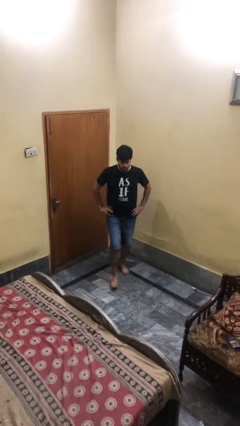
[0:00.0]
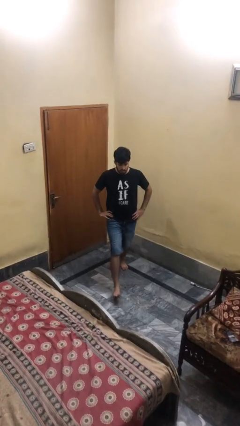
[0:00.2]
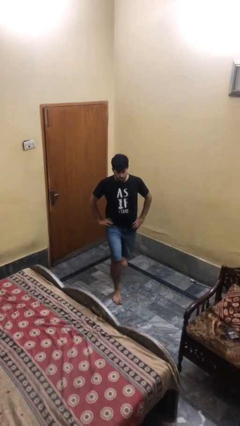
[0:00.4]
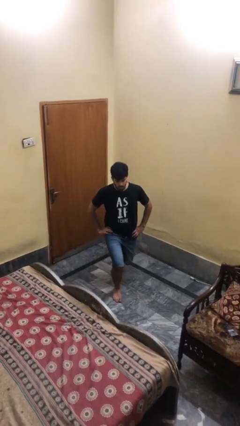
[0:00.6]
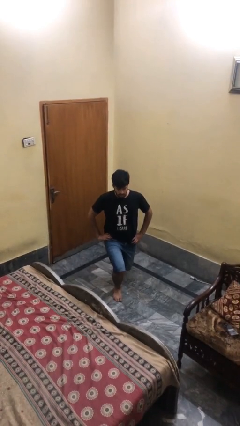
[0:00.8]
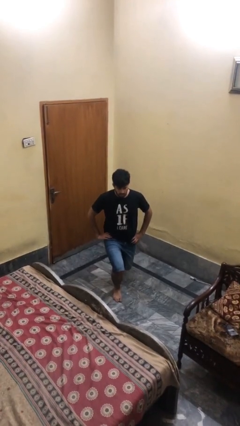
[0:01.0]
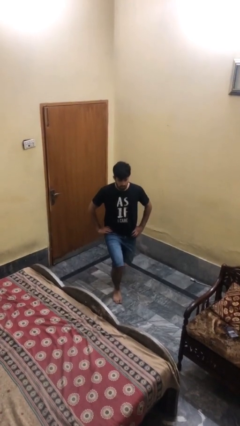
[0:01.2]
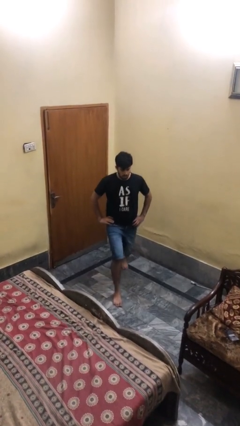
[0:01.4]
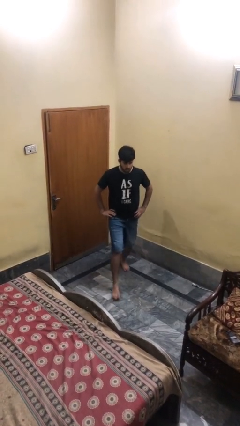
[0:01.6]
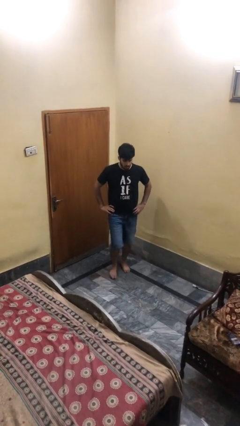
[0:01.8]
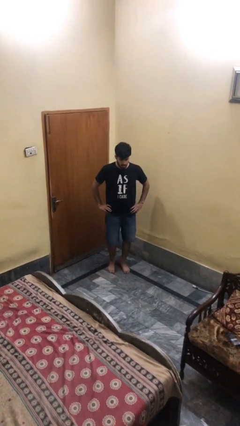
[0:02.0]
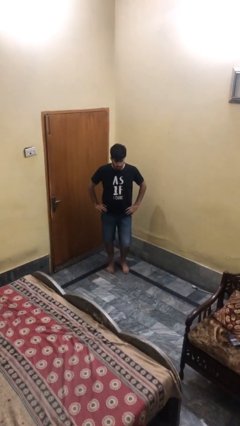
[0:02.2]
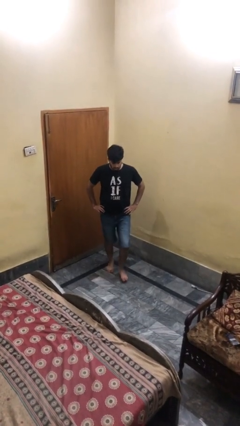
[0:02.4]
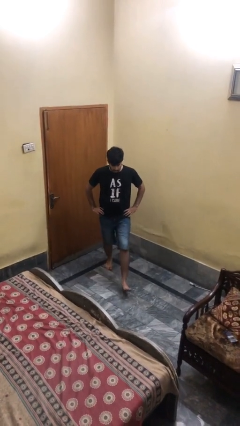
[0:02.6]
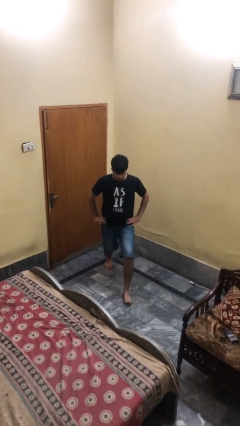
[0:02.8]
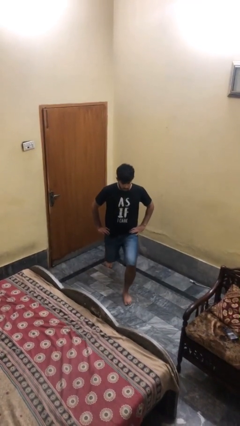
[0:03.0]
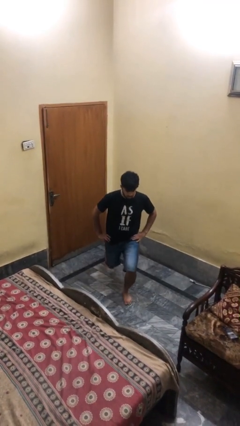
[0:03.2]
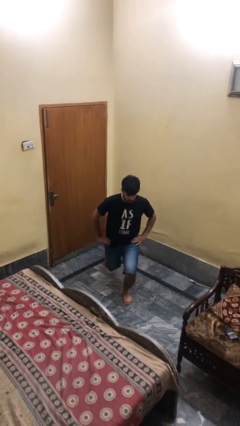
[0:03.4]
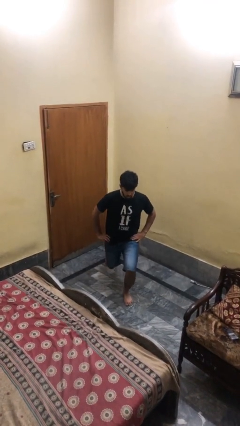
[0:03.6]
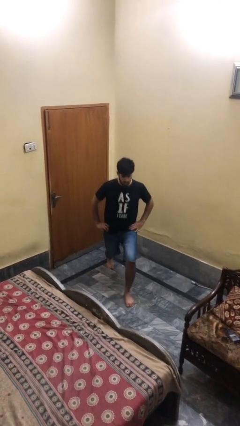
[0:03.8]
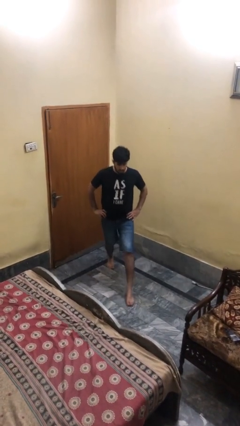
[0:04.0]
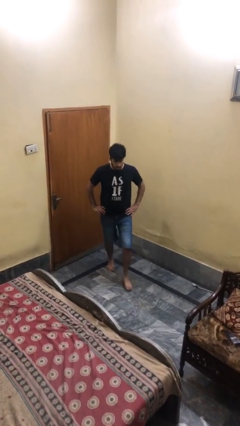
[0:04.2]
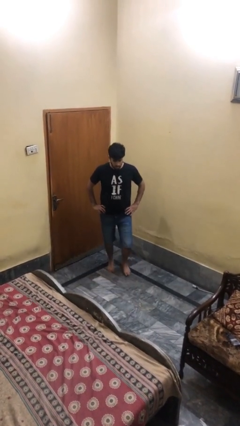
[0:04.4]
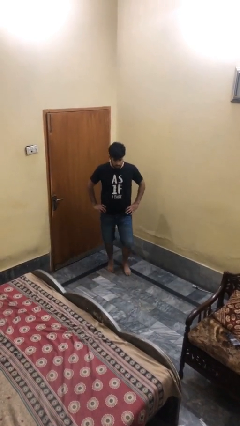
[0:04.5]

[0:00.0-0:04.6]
person exercises with lunges

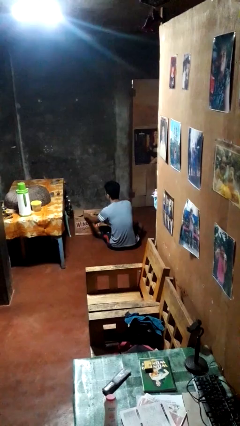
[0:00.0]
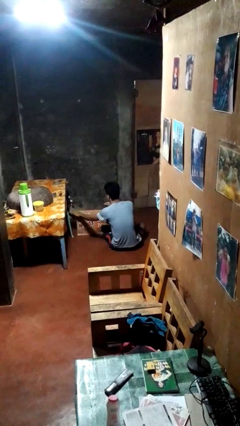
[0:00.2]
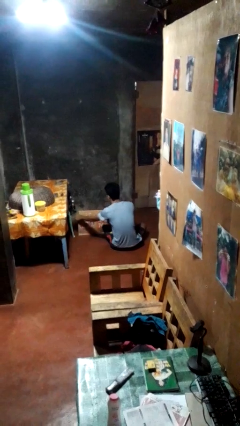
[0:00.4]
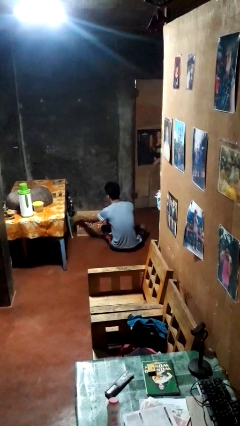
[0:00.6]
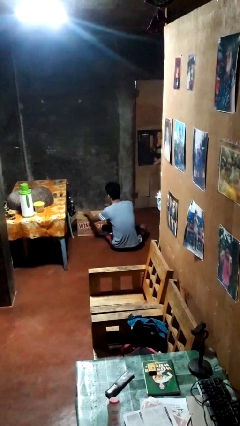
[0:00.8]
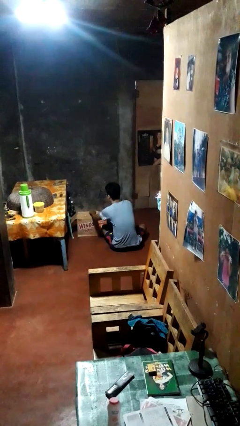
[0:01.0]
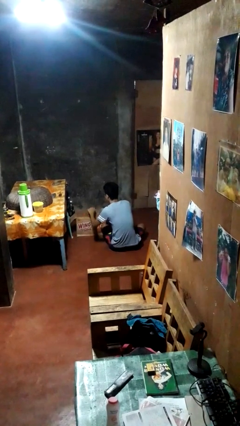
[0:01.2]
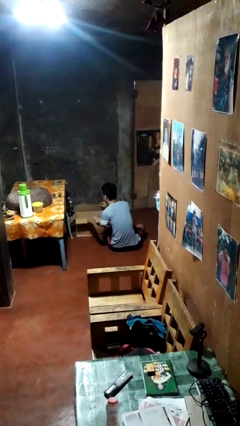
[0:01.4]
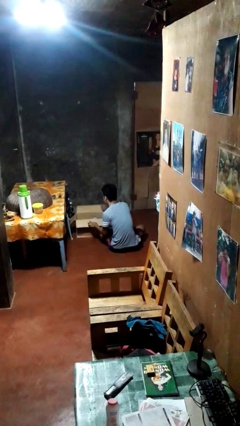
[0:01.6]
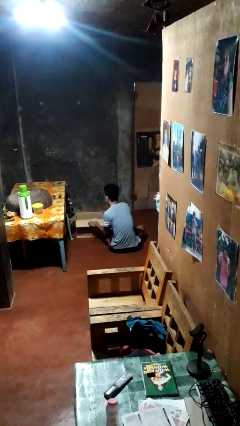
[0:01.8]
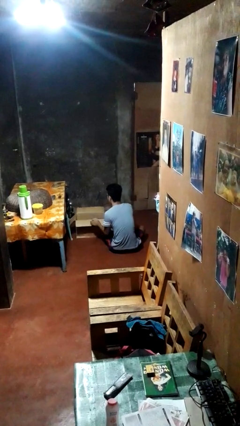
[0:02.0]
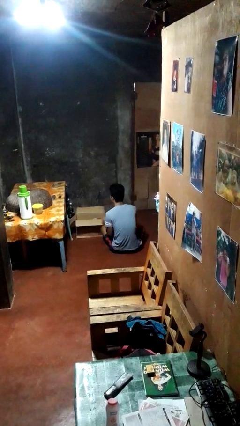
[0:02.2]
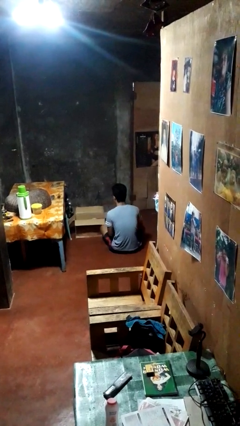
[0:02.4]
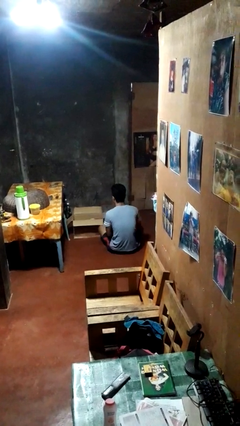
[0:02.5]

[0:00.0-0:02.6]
person opens box

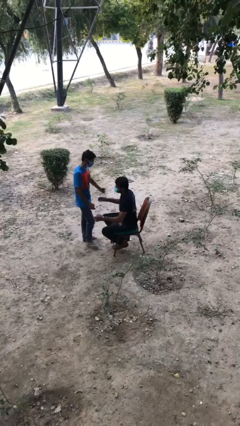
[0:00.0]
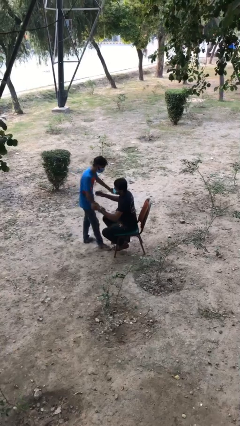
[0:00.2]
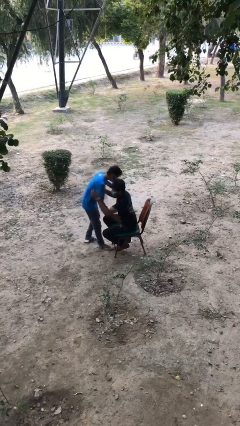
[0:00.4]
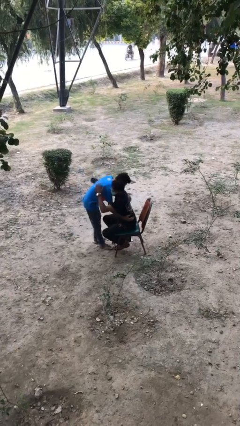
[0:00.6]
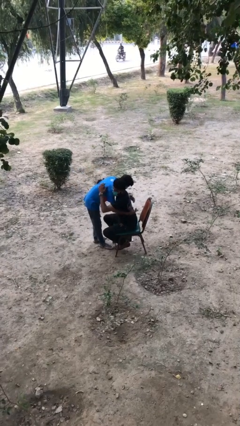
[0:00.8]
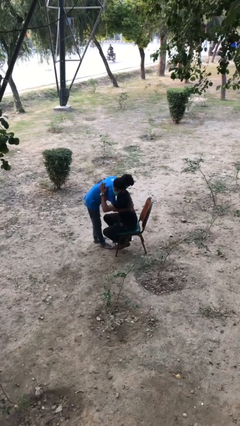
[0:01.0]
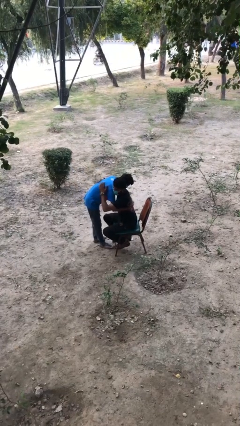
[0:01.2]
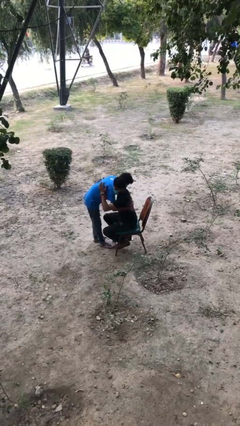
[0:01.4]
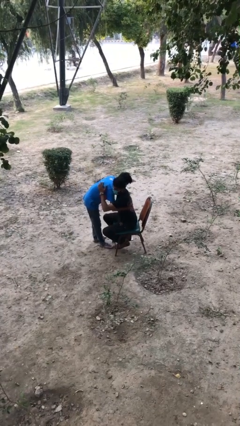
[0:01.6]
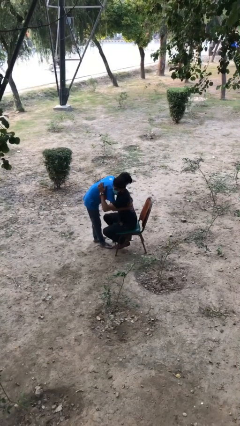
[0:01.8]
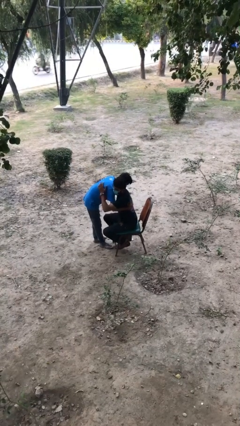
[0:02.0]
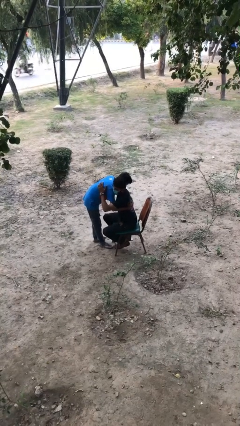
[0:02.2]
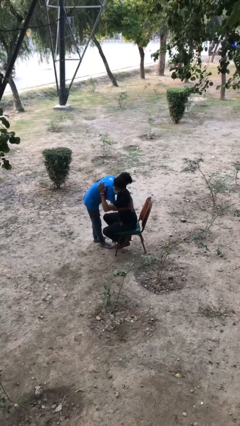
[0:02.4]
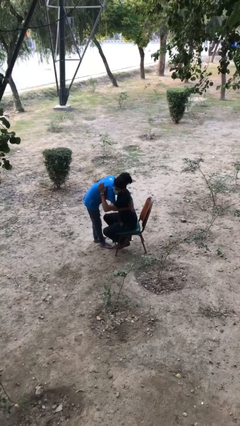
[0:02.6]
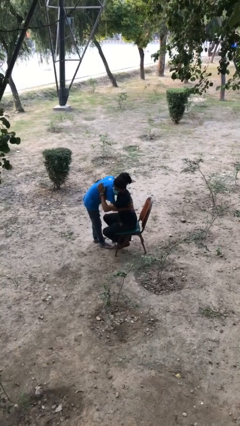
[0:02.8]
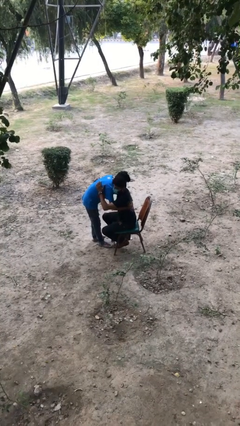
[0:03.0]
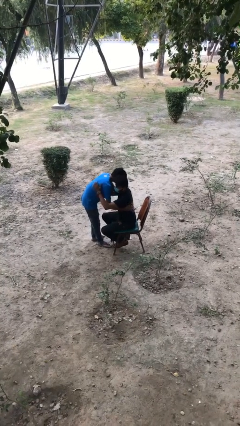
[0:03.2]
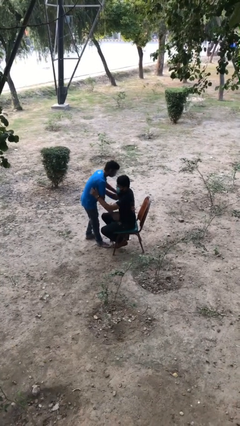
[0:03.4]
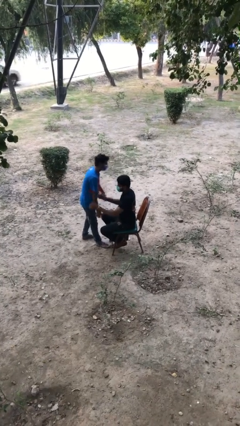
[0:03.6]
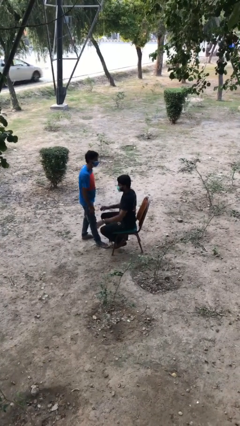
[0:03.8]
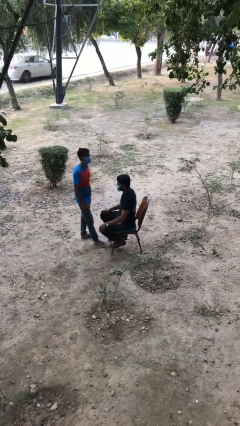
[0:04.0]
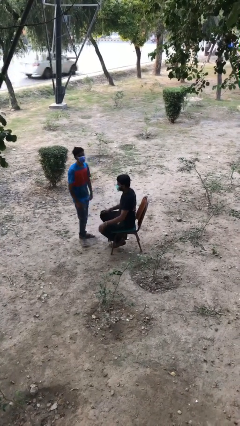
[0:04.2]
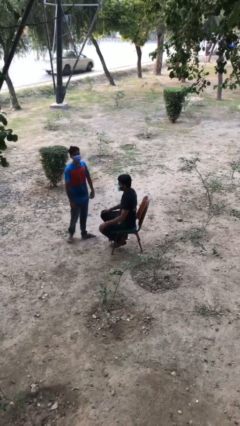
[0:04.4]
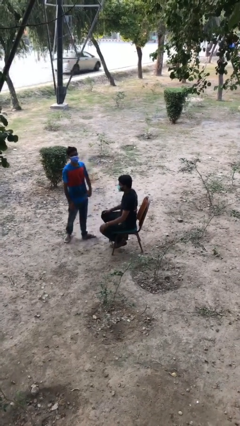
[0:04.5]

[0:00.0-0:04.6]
person embraces person

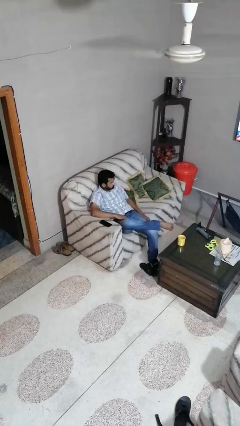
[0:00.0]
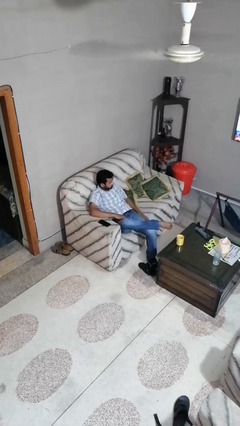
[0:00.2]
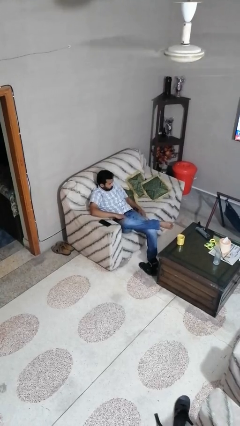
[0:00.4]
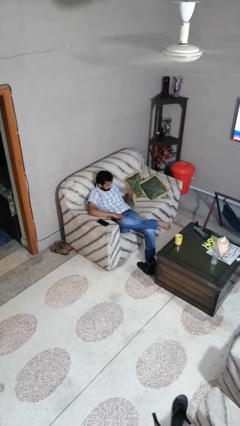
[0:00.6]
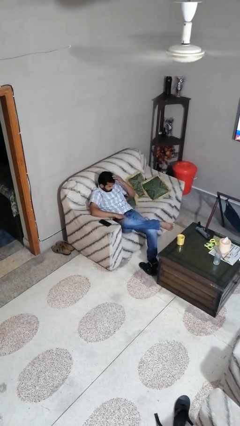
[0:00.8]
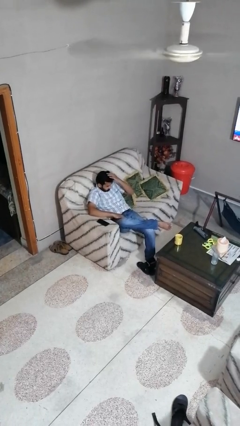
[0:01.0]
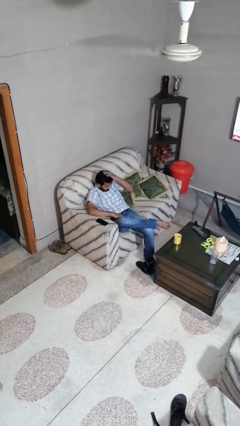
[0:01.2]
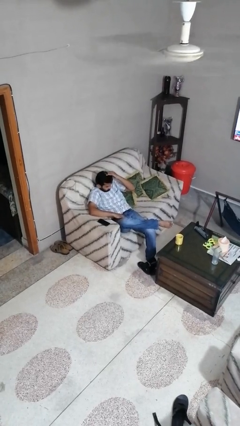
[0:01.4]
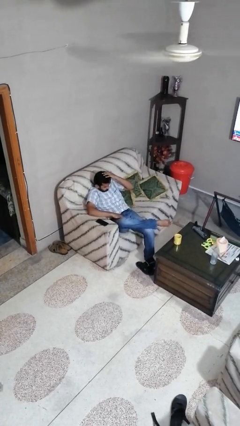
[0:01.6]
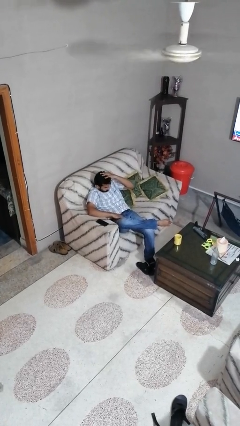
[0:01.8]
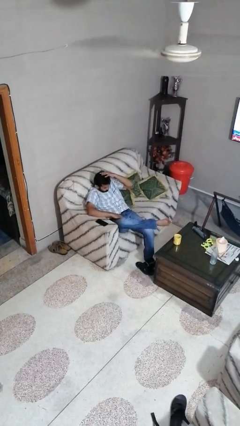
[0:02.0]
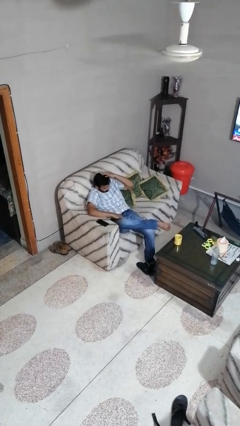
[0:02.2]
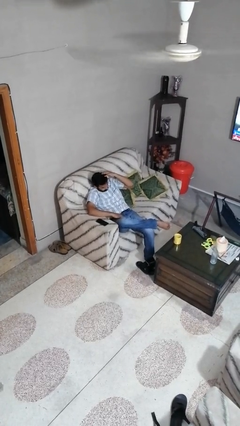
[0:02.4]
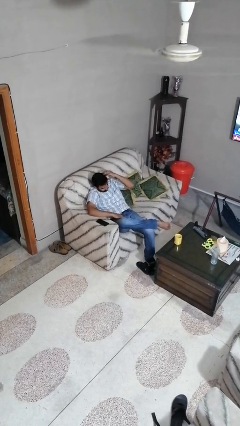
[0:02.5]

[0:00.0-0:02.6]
person strokes hair

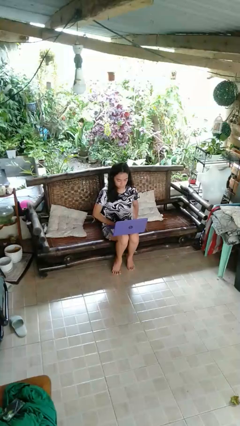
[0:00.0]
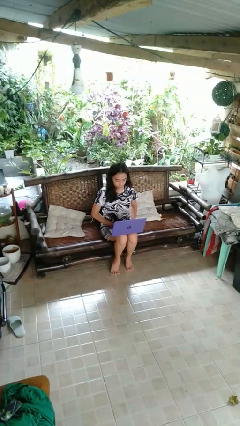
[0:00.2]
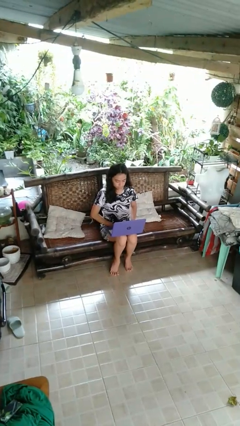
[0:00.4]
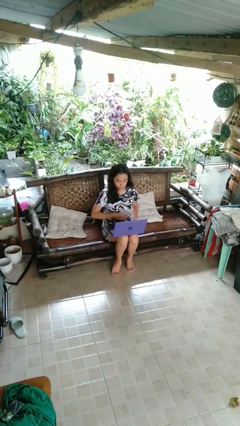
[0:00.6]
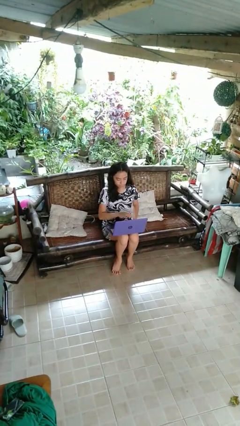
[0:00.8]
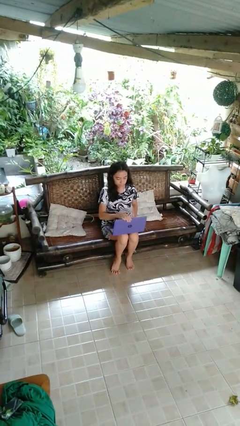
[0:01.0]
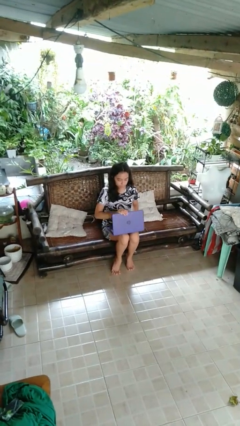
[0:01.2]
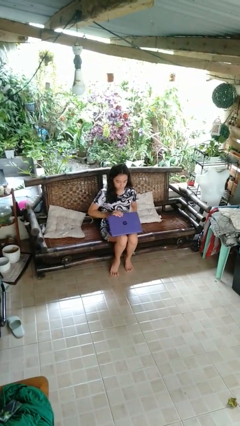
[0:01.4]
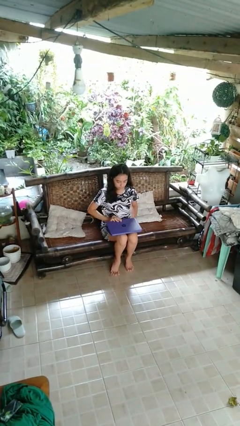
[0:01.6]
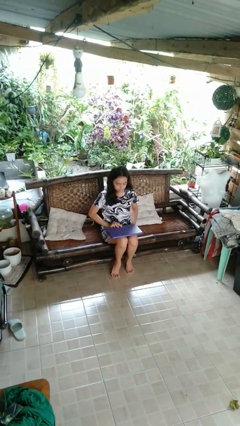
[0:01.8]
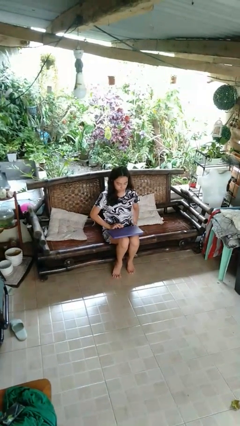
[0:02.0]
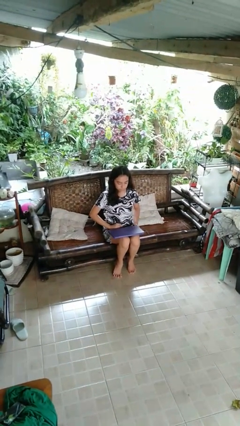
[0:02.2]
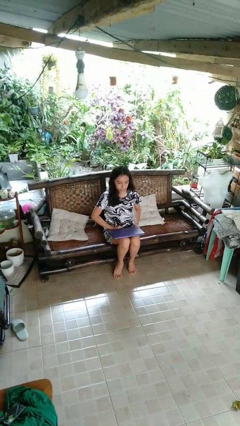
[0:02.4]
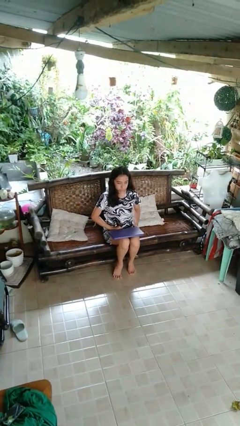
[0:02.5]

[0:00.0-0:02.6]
person closes laptop

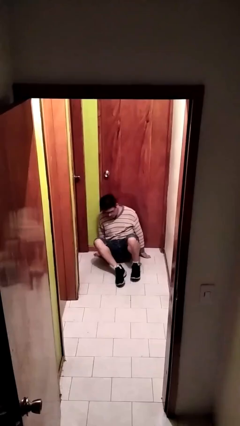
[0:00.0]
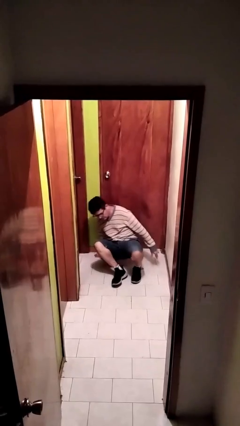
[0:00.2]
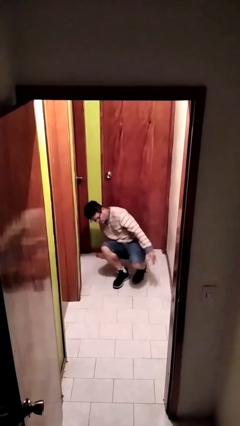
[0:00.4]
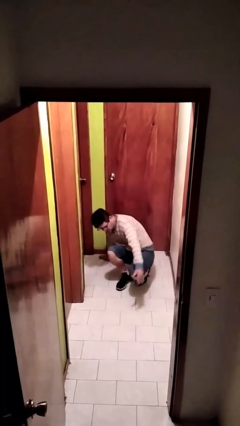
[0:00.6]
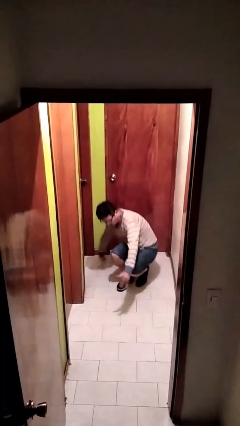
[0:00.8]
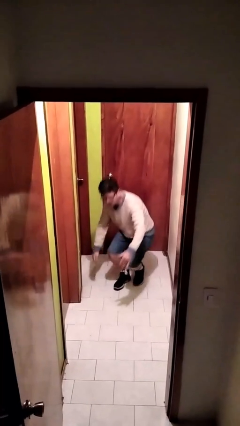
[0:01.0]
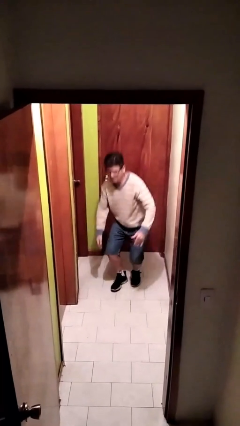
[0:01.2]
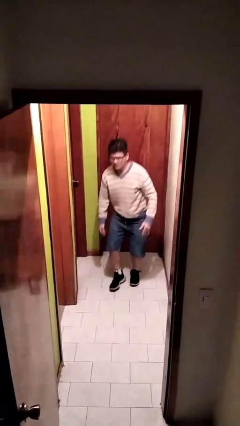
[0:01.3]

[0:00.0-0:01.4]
person stands up
